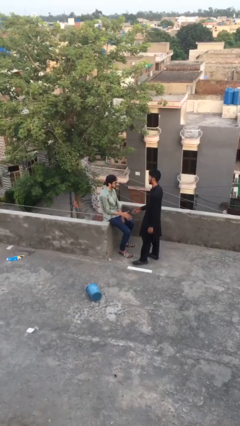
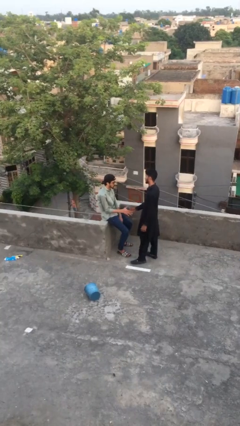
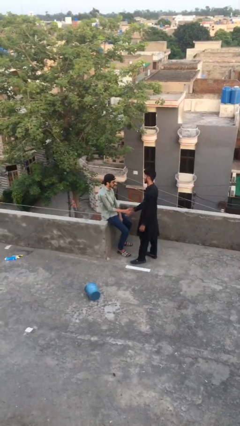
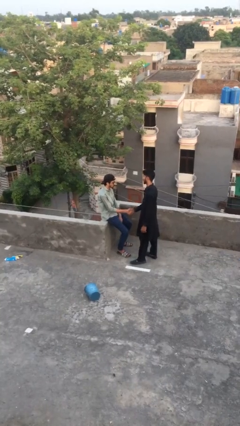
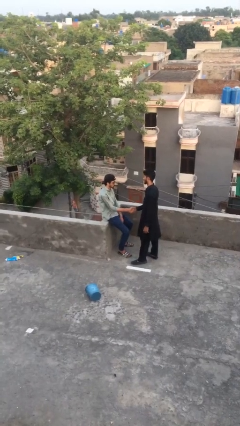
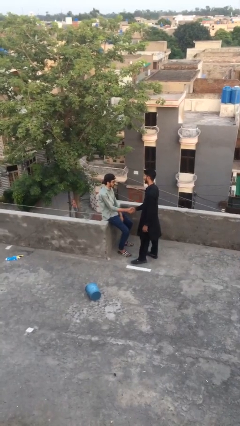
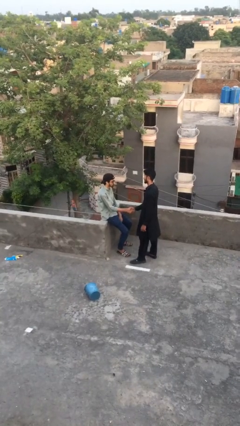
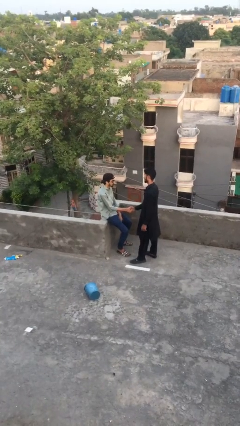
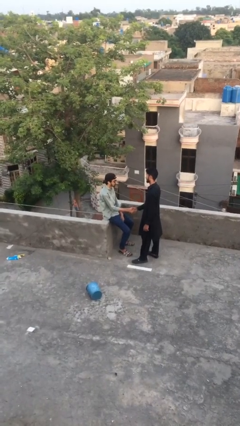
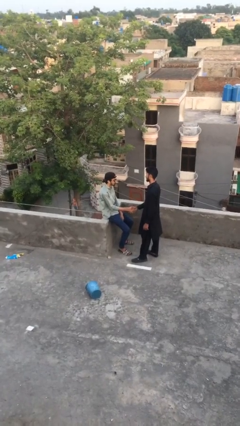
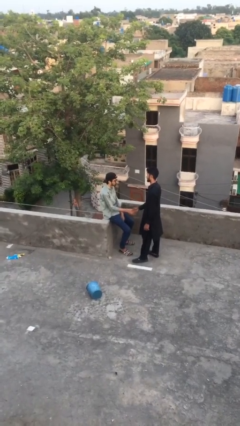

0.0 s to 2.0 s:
person shakes hand

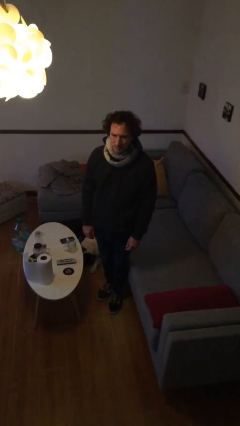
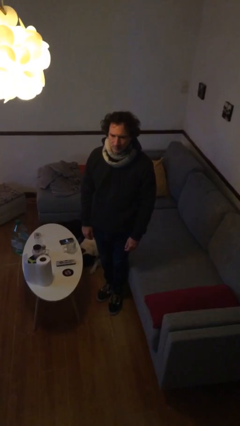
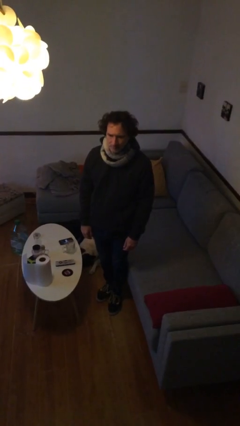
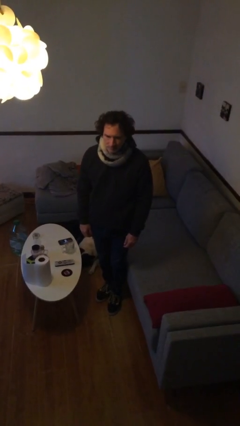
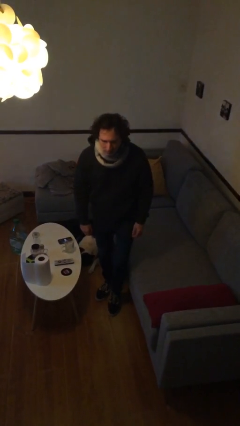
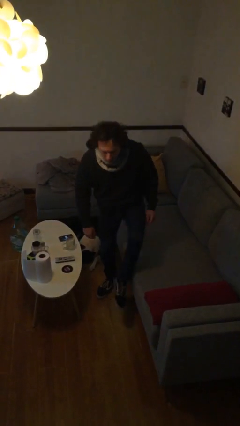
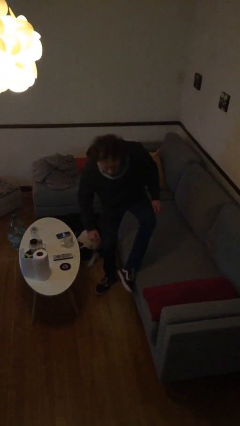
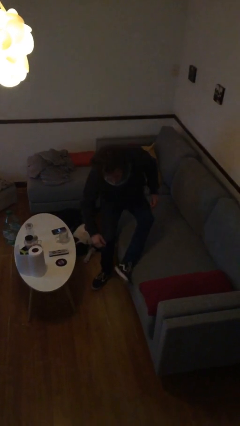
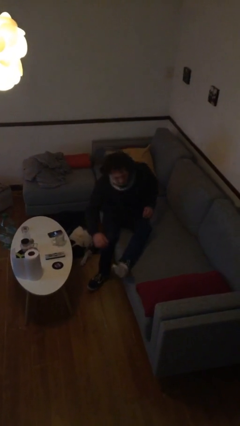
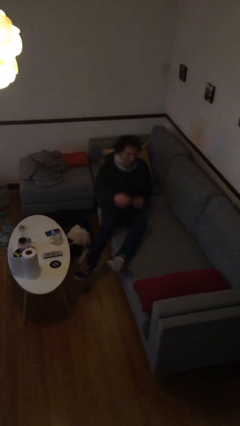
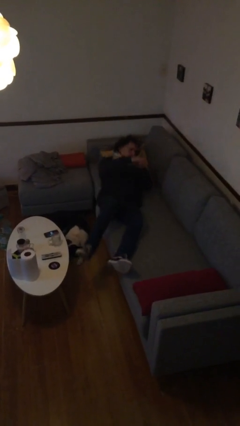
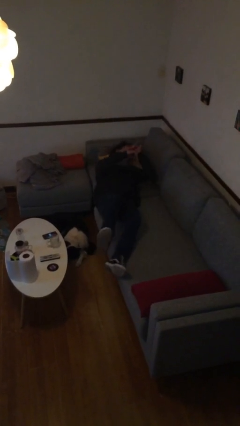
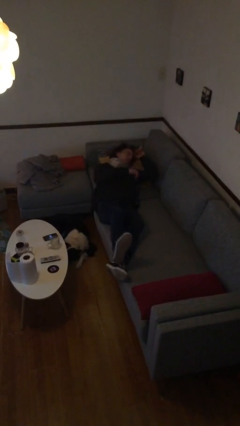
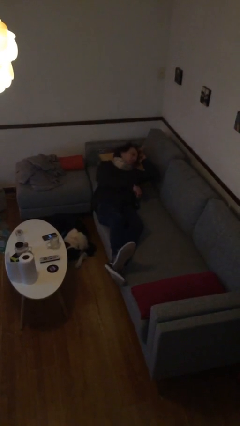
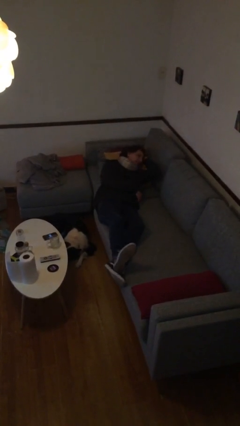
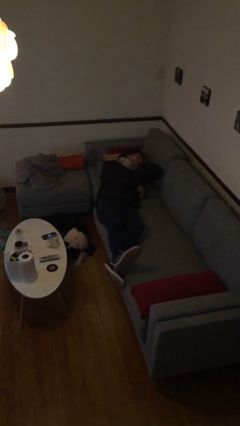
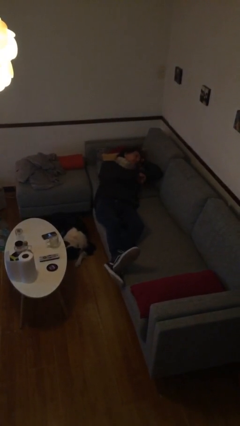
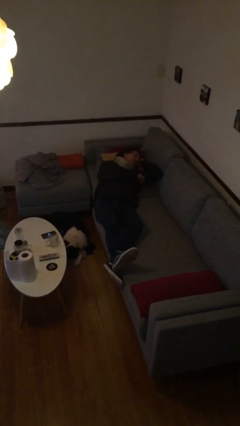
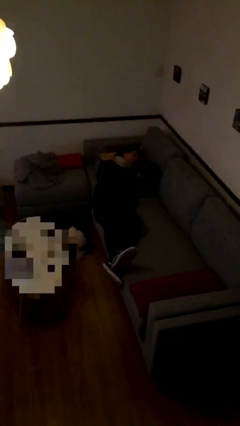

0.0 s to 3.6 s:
person lies down on couch

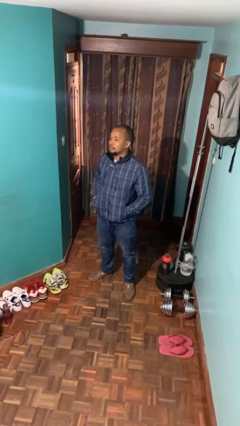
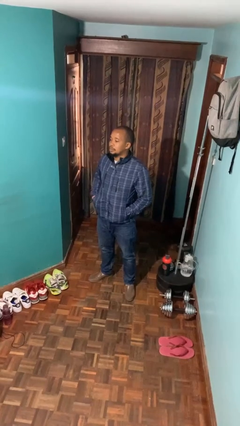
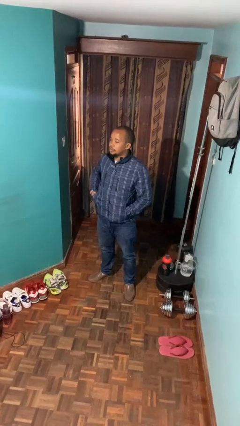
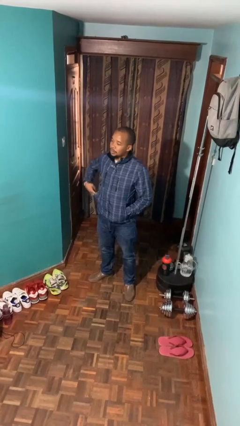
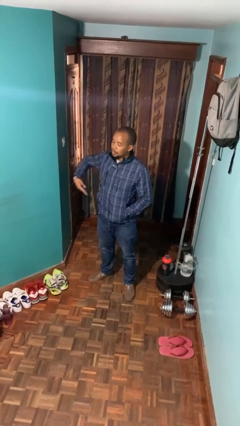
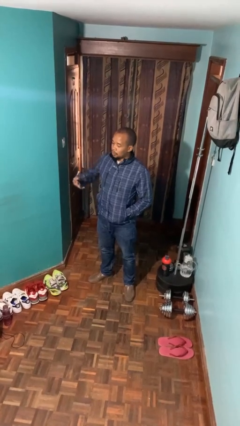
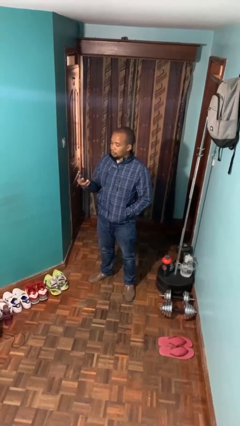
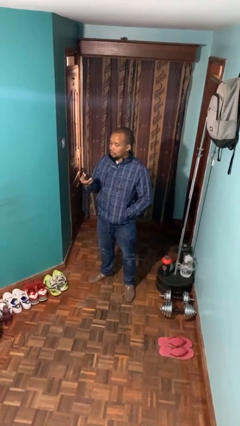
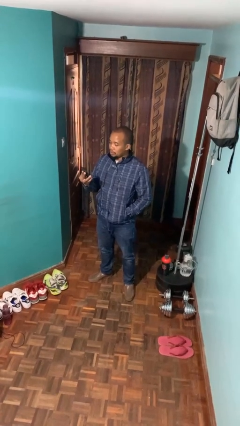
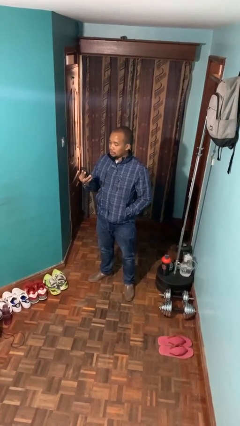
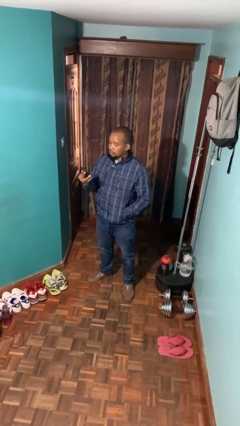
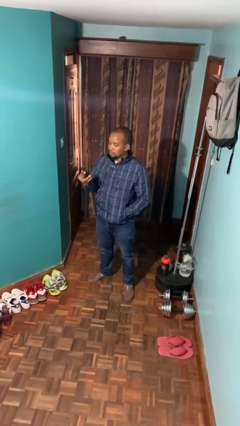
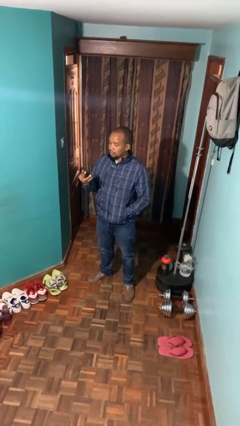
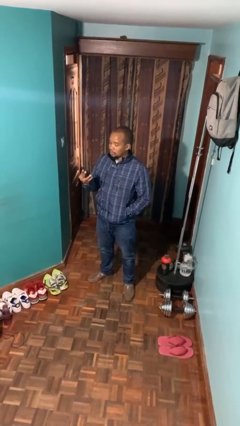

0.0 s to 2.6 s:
person takes phone from pocket

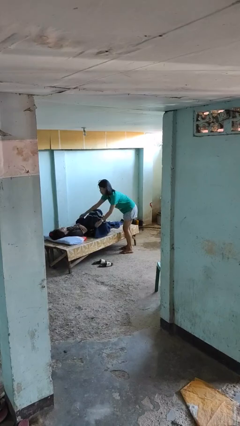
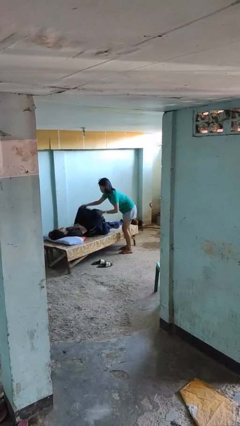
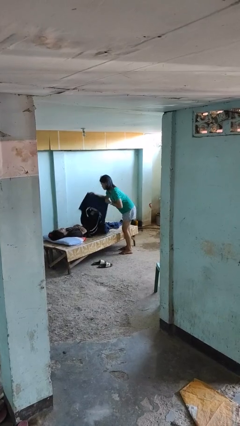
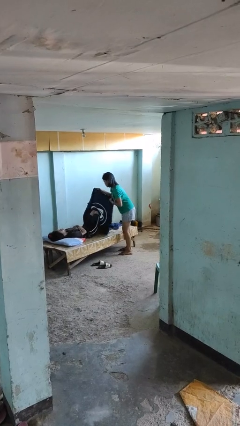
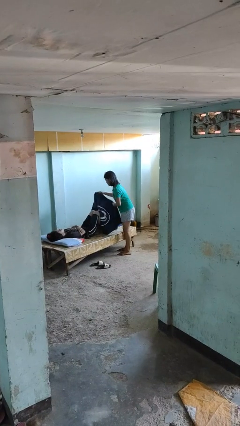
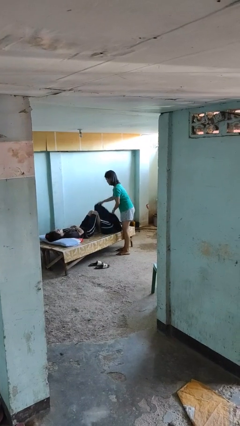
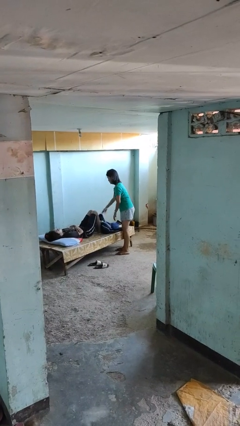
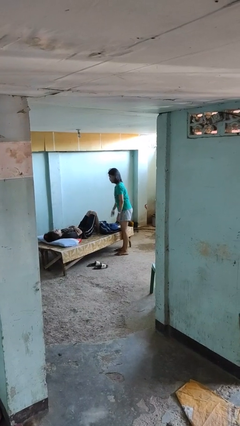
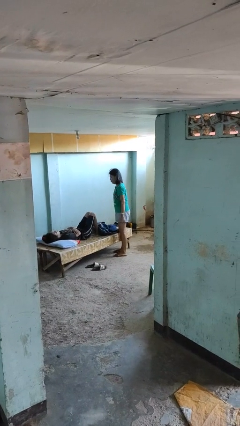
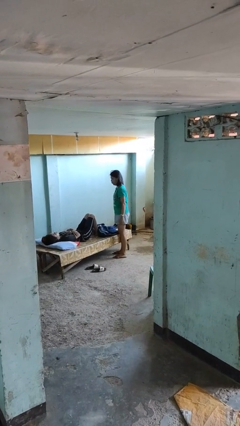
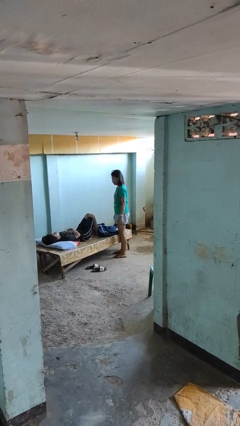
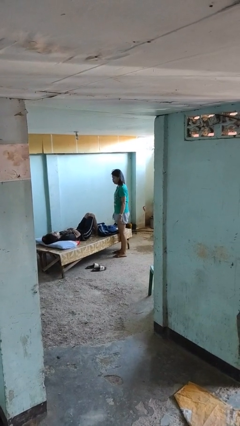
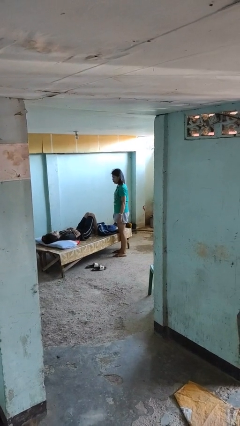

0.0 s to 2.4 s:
person uncovers friend with blanket

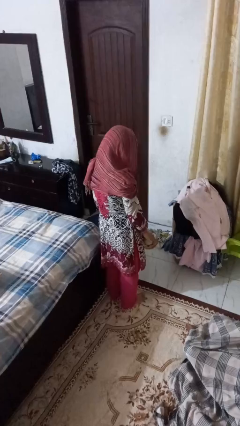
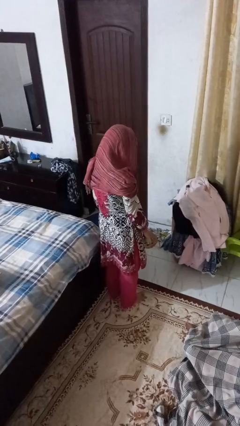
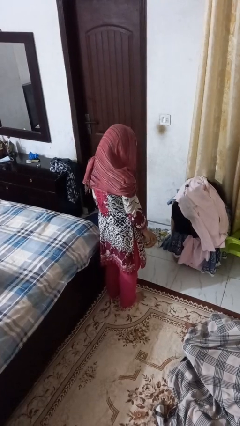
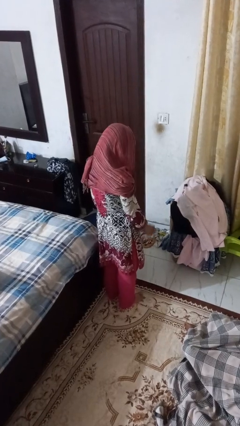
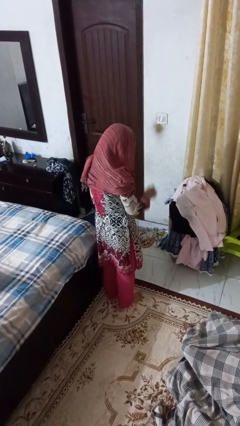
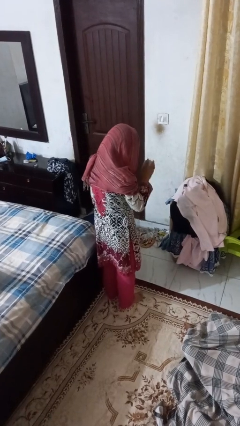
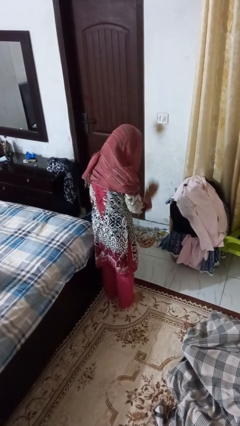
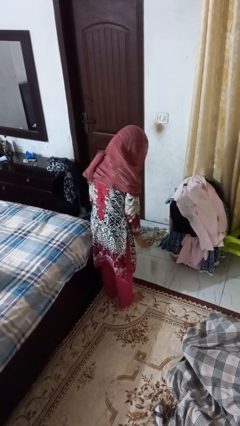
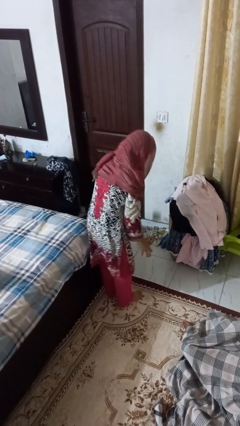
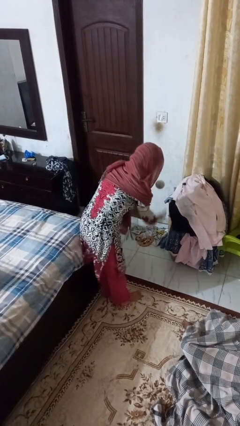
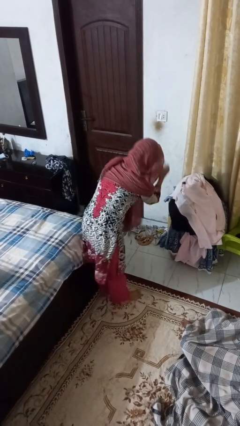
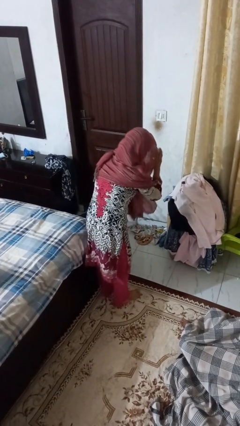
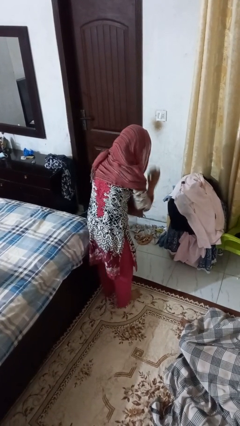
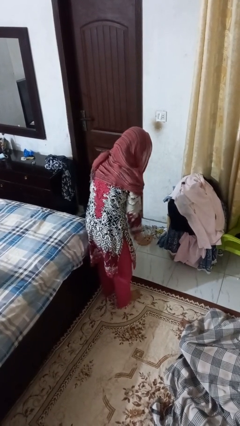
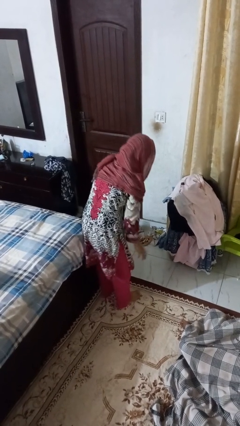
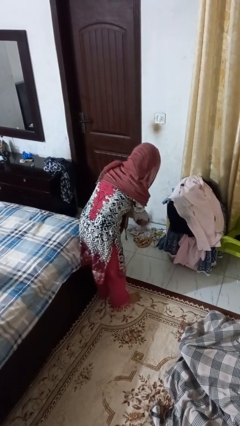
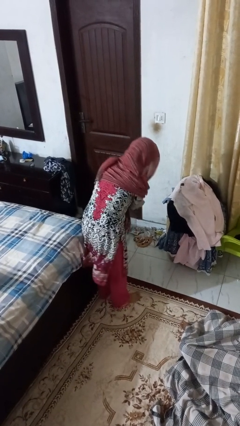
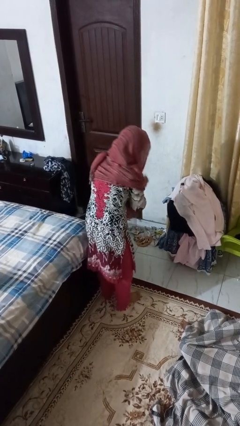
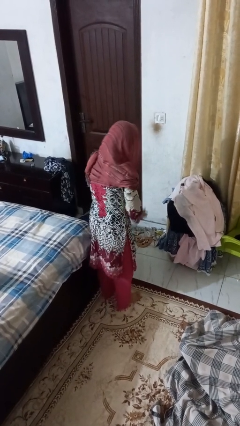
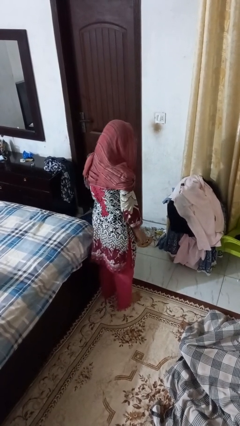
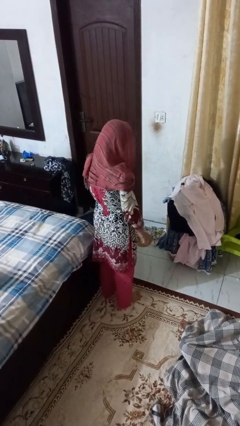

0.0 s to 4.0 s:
person bounces ball on floor

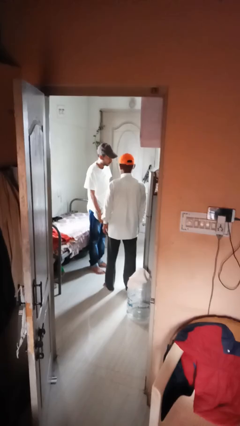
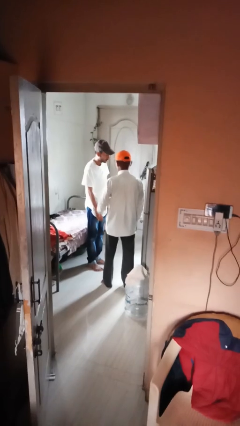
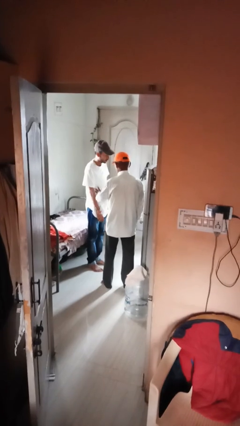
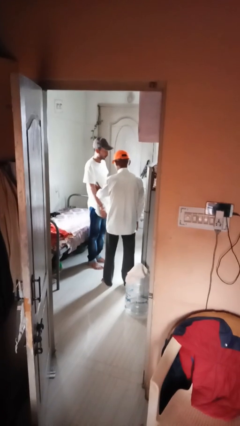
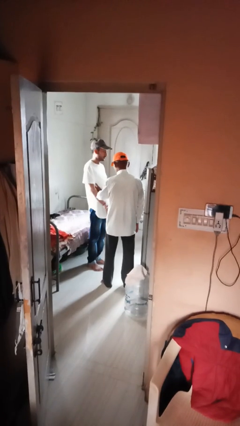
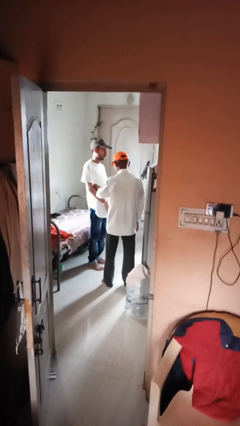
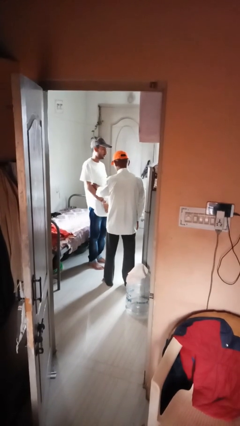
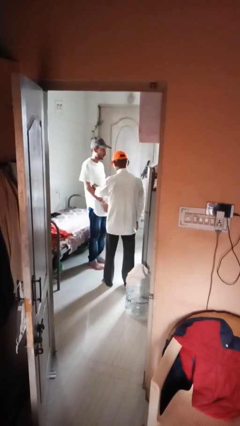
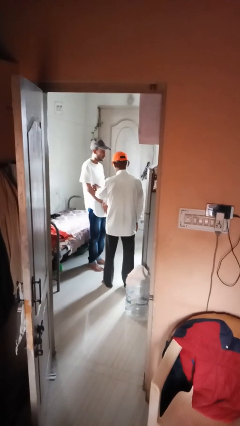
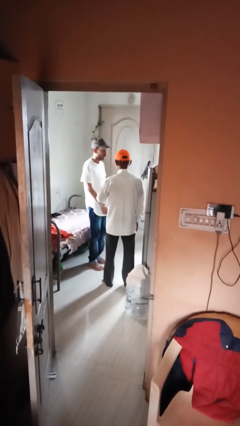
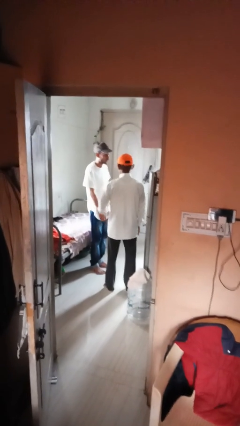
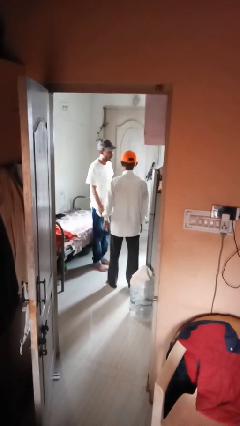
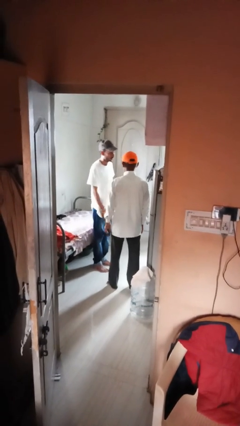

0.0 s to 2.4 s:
person tickles person

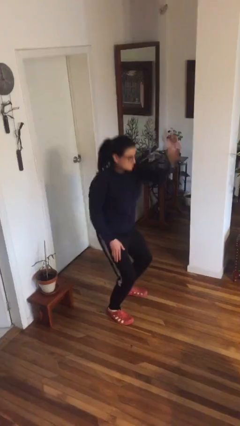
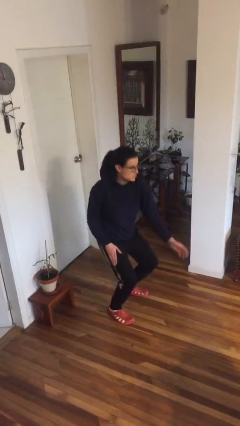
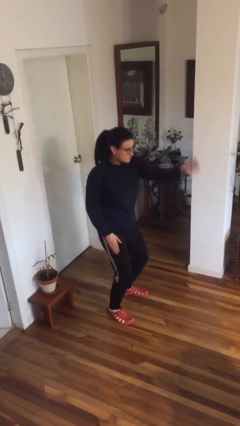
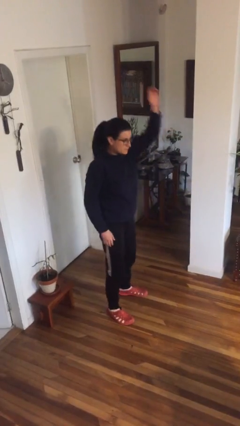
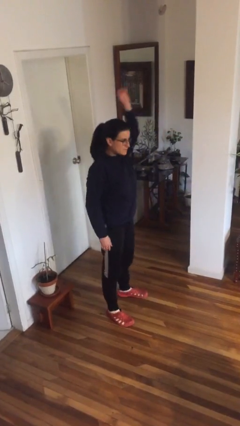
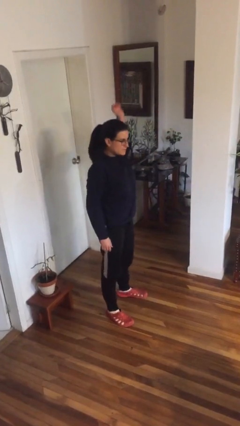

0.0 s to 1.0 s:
person karate chop
